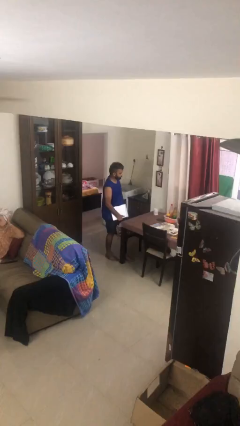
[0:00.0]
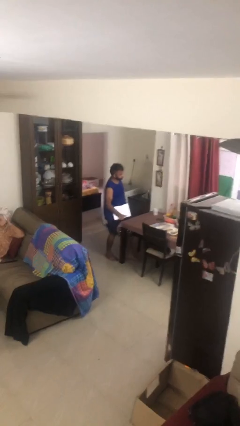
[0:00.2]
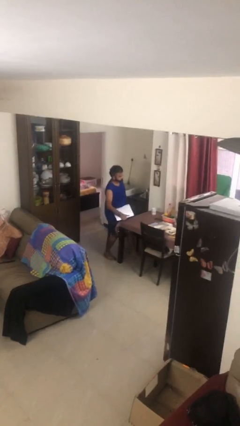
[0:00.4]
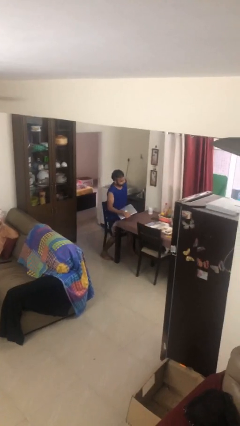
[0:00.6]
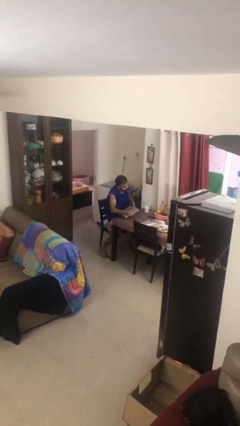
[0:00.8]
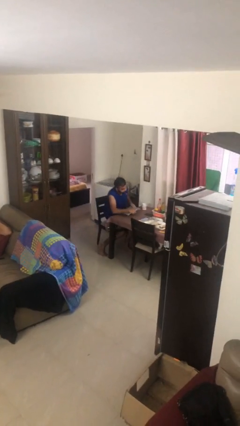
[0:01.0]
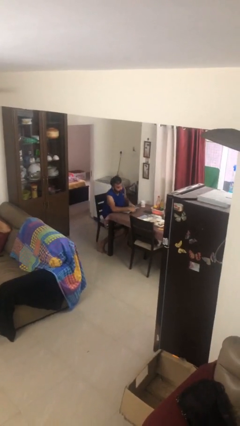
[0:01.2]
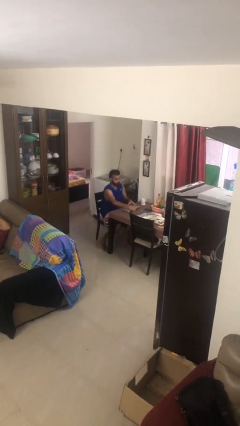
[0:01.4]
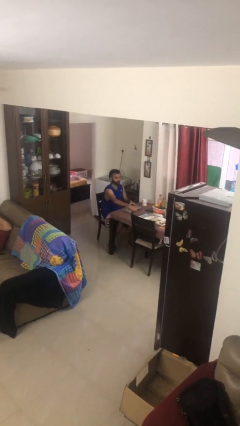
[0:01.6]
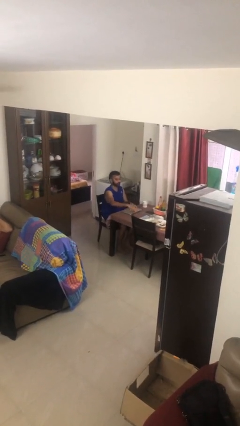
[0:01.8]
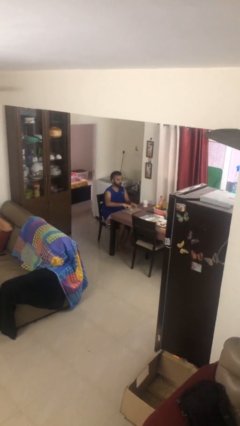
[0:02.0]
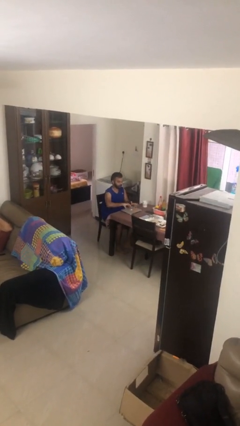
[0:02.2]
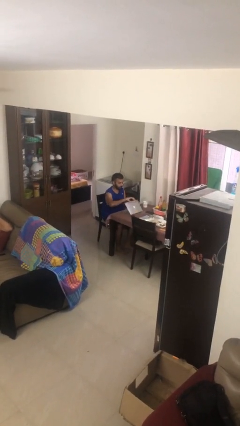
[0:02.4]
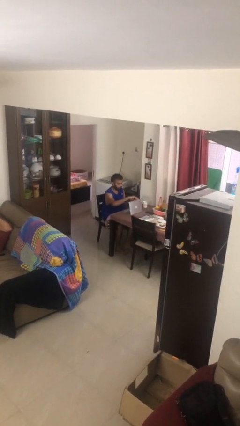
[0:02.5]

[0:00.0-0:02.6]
person sits down

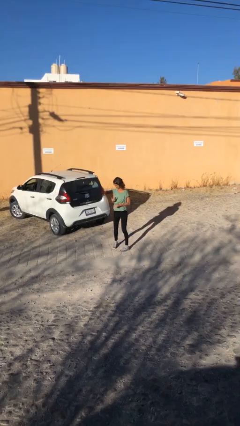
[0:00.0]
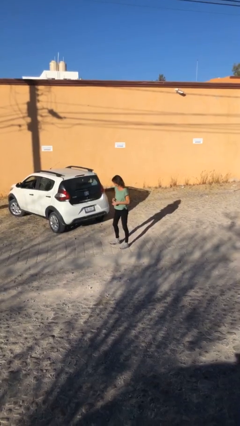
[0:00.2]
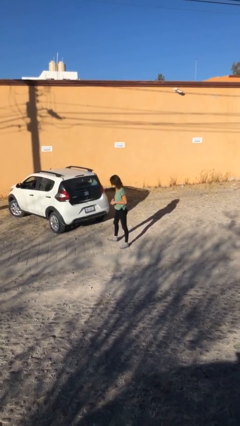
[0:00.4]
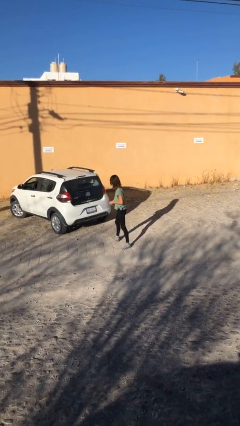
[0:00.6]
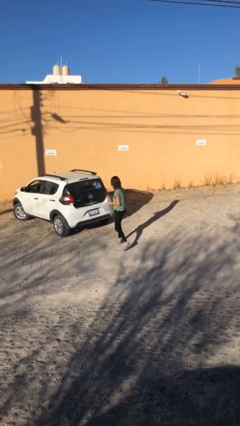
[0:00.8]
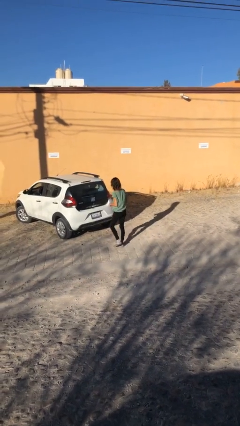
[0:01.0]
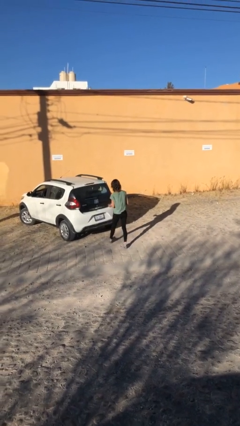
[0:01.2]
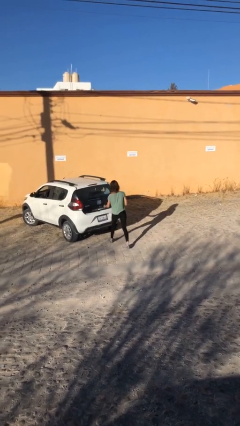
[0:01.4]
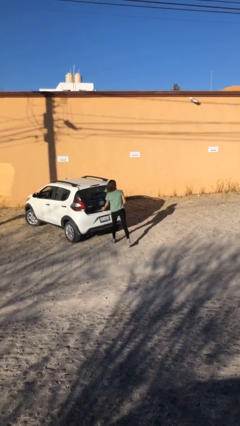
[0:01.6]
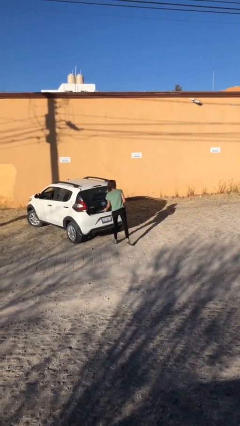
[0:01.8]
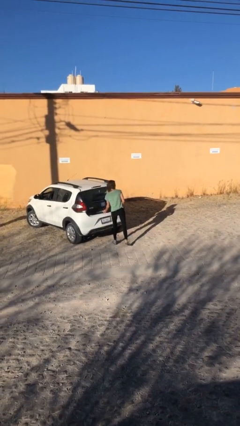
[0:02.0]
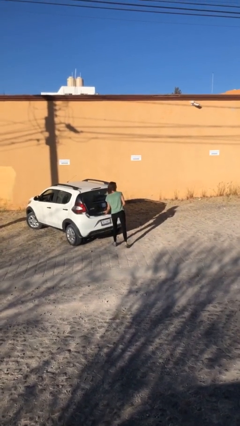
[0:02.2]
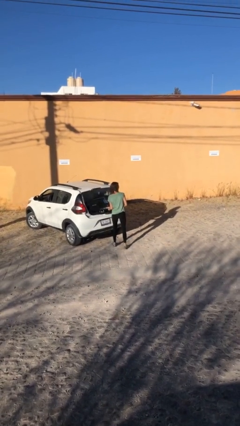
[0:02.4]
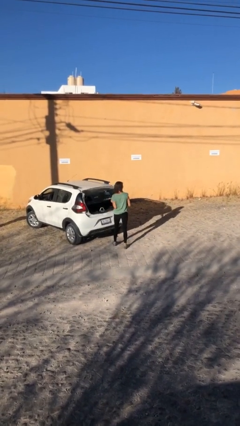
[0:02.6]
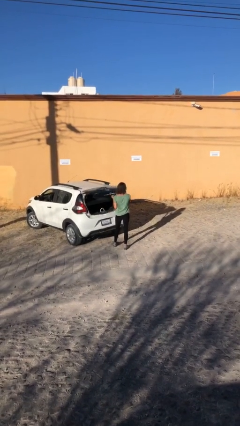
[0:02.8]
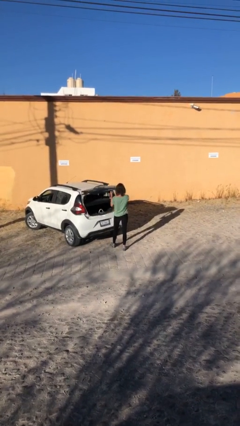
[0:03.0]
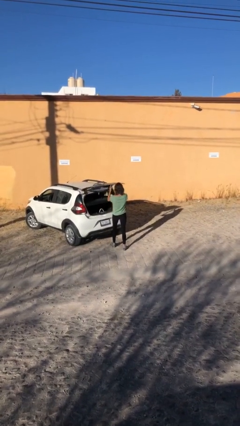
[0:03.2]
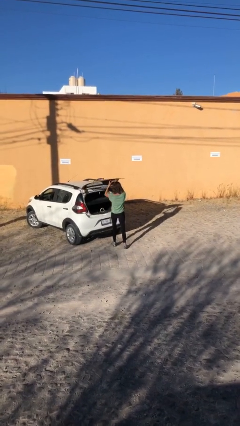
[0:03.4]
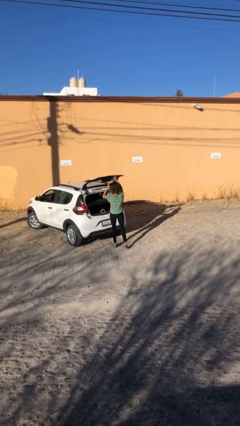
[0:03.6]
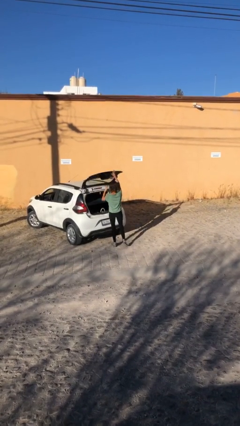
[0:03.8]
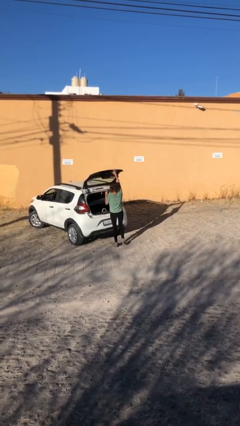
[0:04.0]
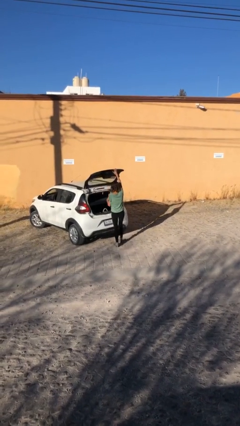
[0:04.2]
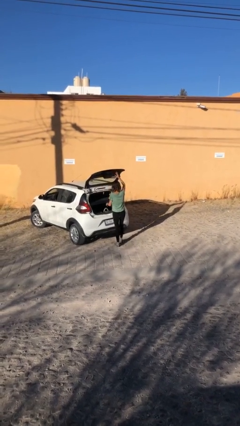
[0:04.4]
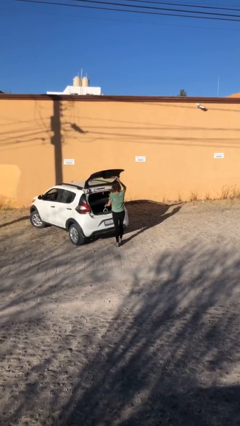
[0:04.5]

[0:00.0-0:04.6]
person opens car trunk

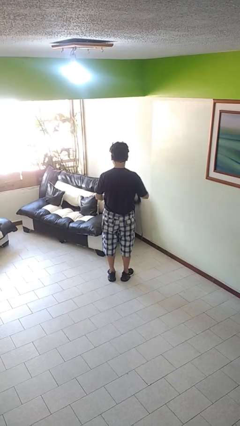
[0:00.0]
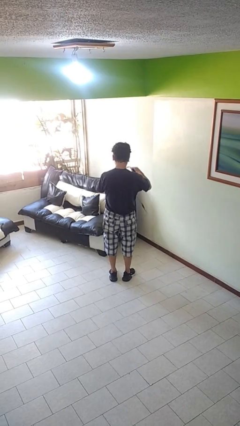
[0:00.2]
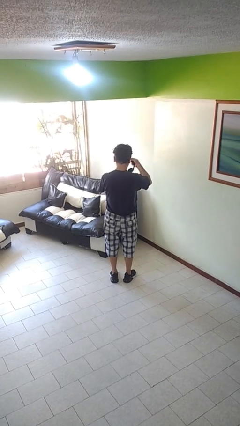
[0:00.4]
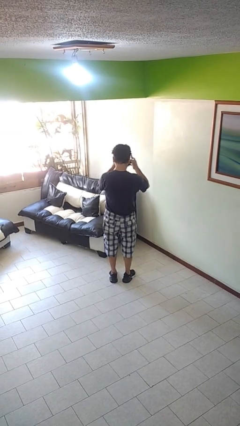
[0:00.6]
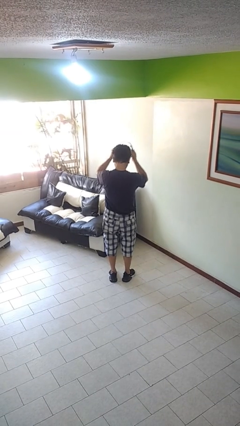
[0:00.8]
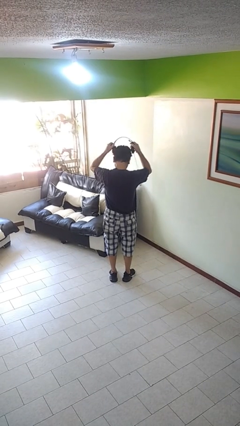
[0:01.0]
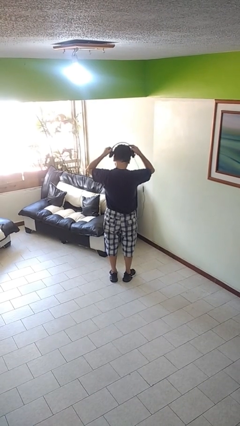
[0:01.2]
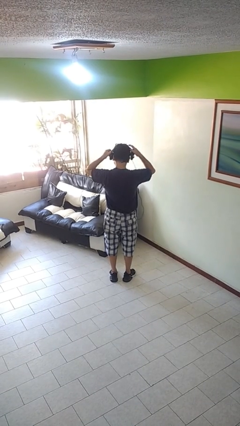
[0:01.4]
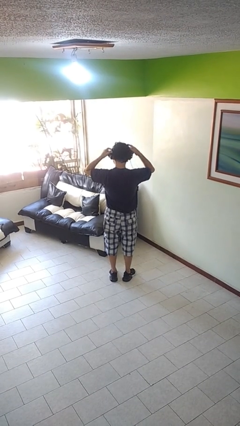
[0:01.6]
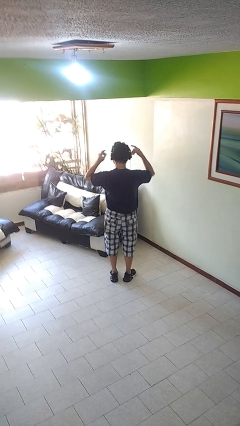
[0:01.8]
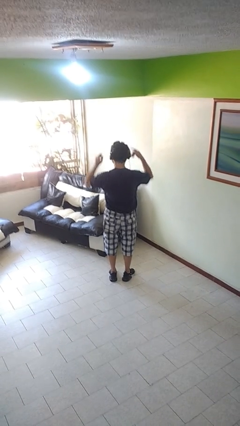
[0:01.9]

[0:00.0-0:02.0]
person puts on headphones

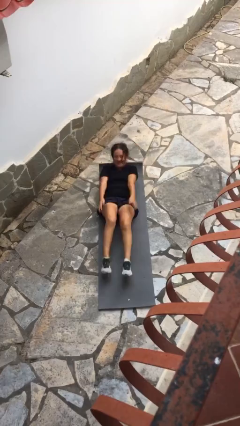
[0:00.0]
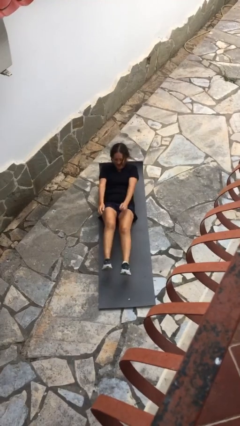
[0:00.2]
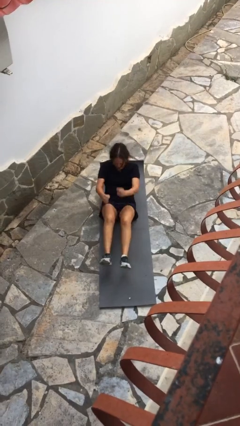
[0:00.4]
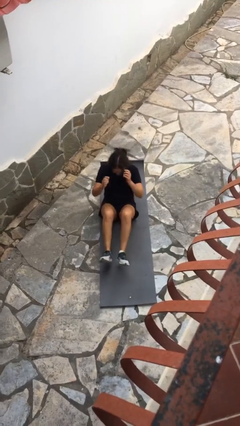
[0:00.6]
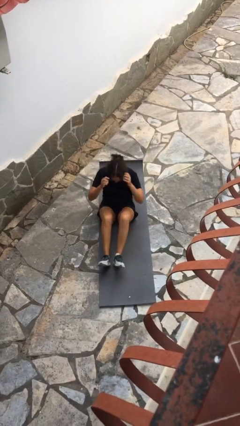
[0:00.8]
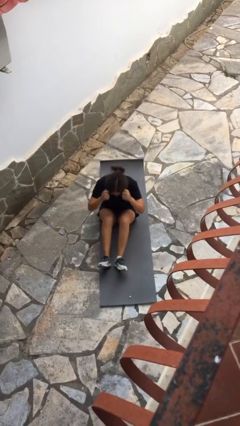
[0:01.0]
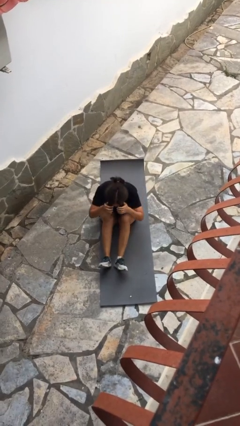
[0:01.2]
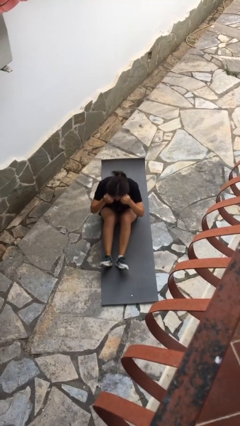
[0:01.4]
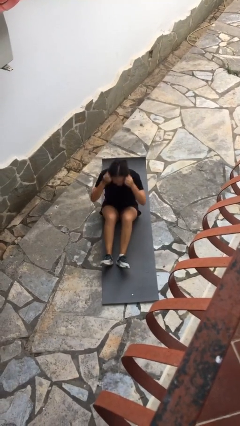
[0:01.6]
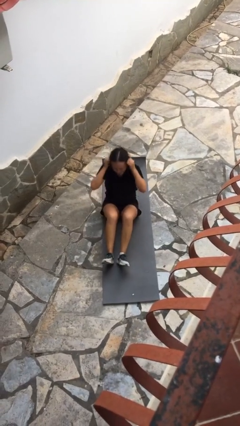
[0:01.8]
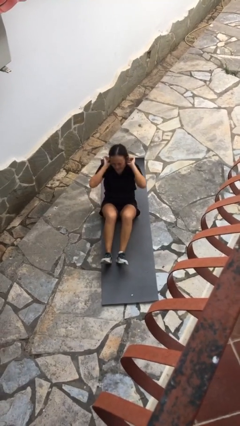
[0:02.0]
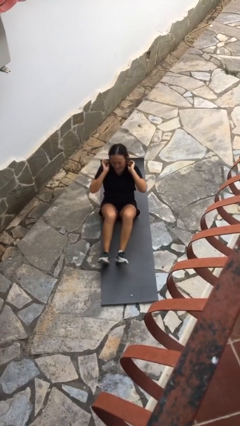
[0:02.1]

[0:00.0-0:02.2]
person exercises with situp

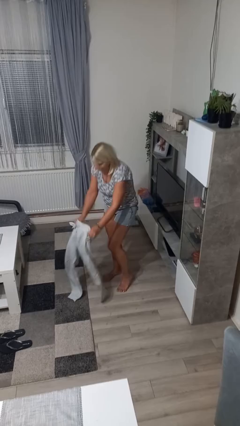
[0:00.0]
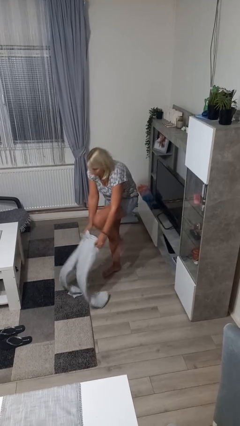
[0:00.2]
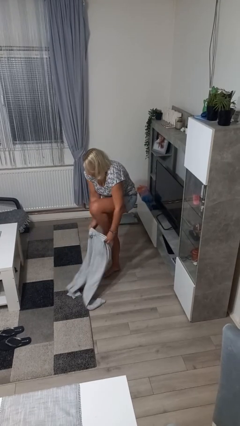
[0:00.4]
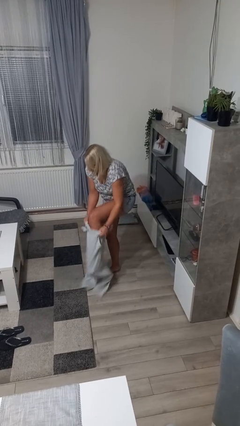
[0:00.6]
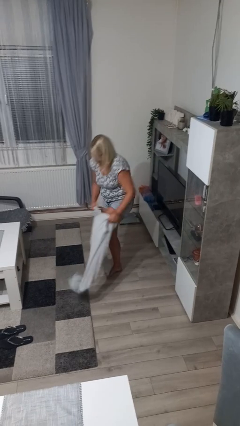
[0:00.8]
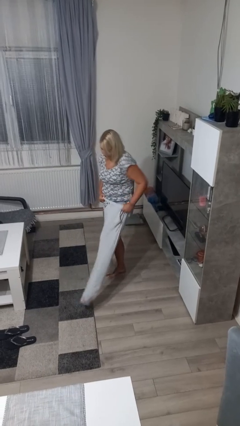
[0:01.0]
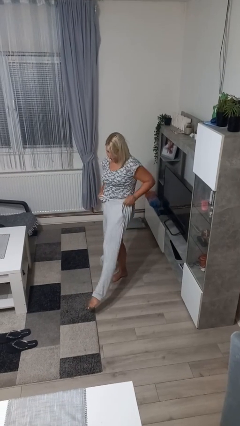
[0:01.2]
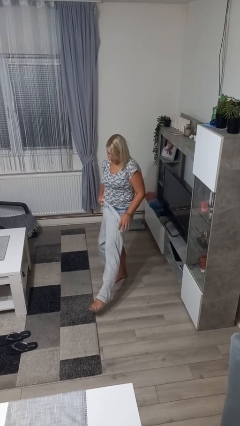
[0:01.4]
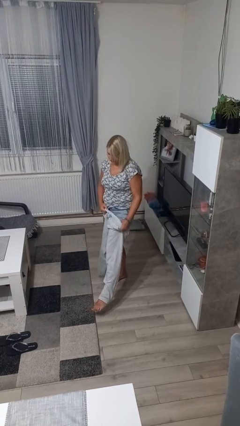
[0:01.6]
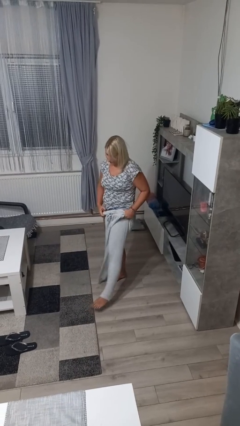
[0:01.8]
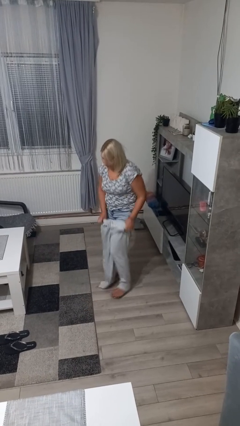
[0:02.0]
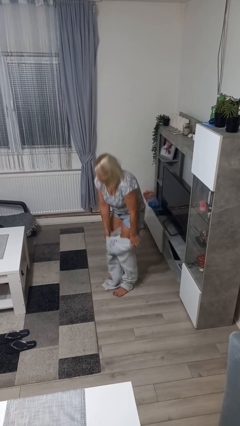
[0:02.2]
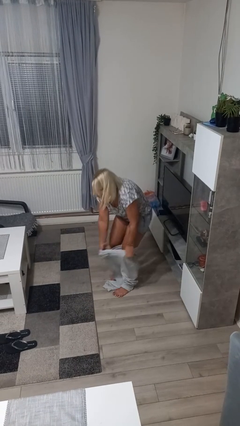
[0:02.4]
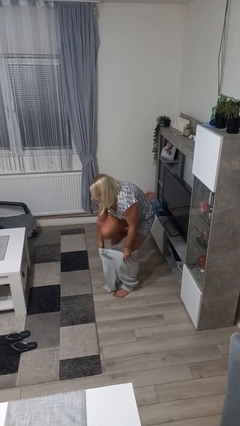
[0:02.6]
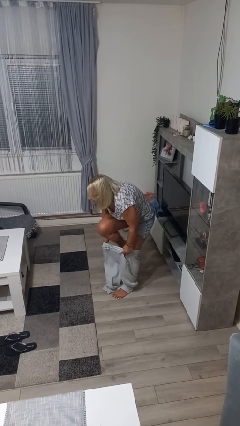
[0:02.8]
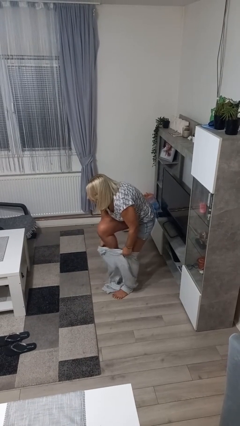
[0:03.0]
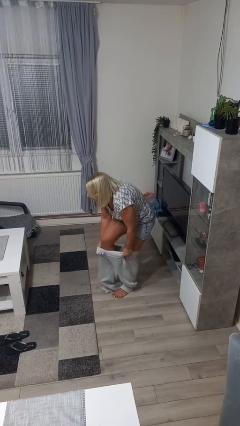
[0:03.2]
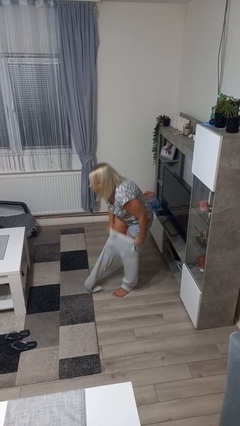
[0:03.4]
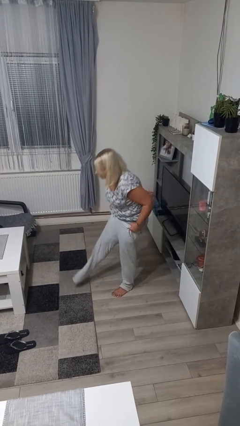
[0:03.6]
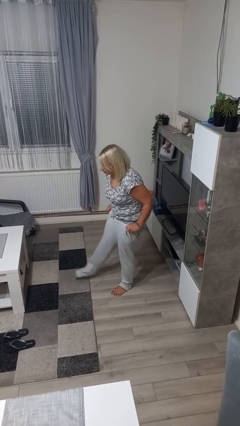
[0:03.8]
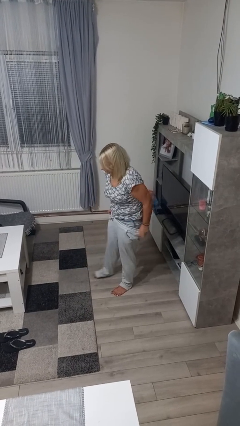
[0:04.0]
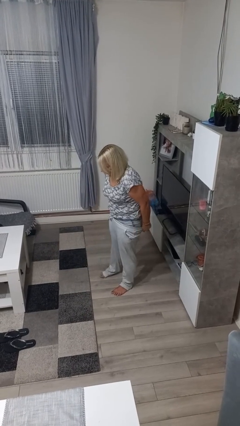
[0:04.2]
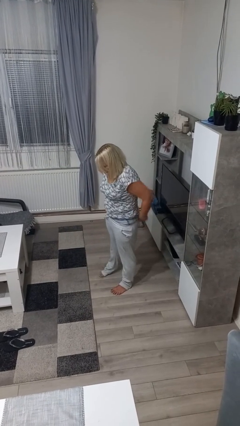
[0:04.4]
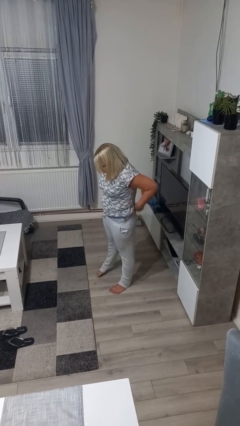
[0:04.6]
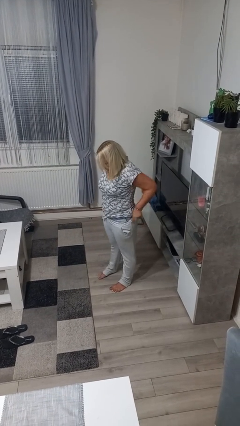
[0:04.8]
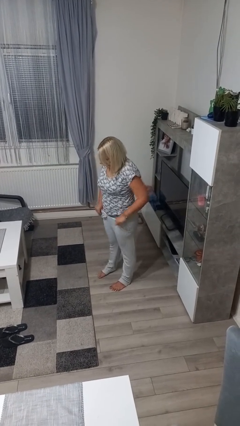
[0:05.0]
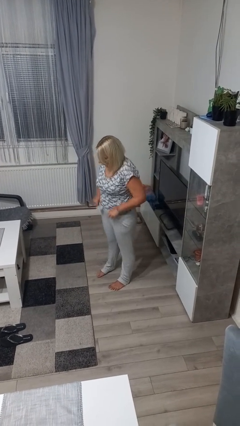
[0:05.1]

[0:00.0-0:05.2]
person puts on pants

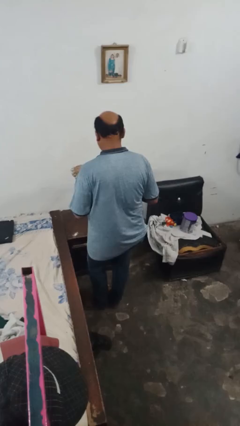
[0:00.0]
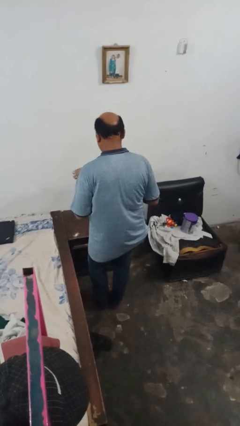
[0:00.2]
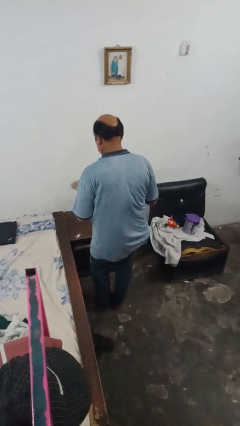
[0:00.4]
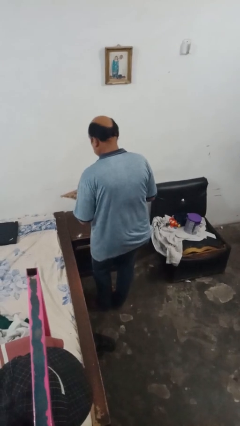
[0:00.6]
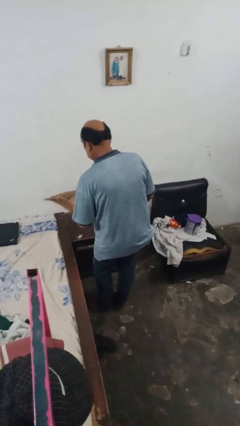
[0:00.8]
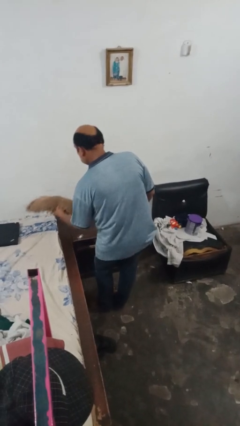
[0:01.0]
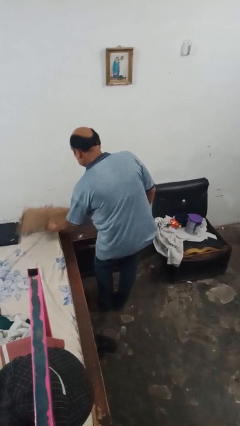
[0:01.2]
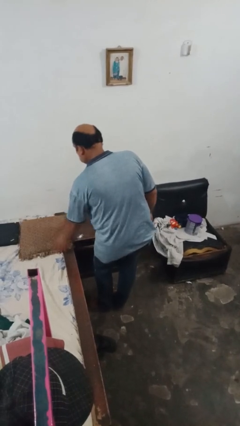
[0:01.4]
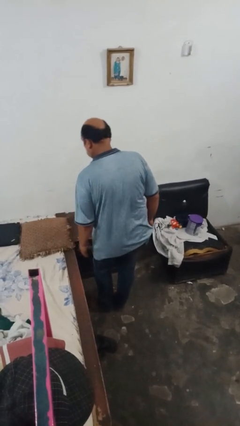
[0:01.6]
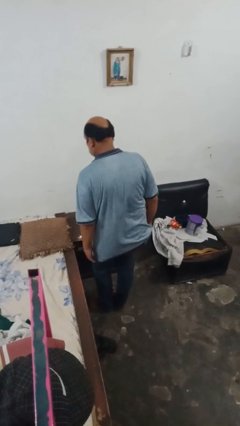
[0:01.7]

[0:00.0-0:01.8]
person puts down object on bed
